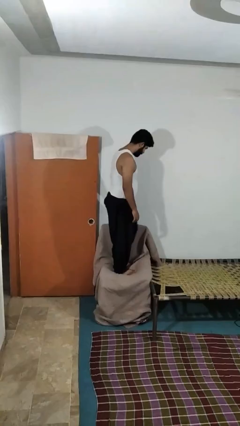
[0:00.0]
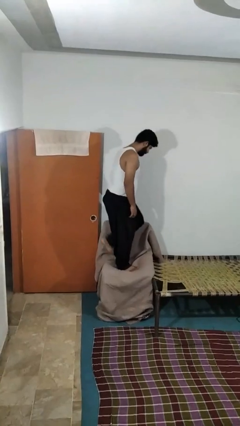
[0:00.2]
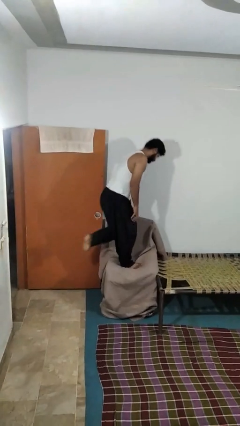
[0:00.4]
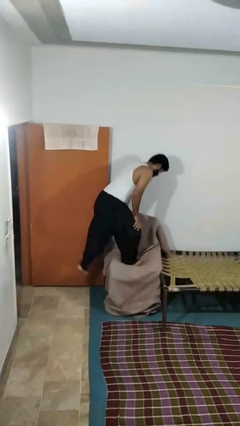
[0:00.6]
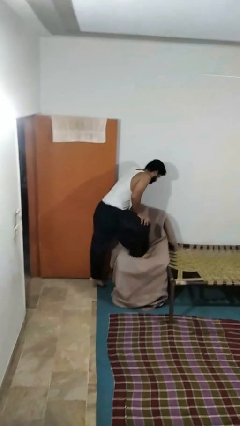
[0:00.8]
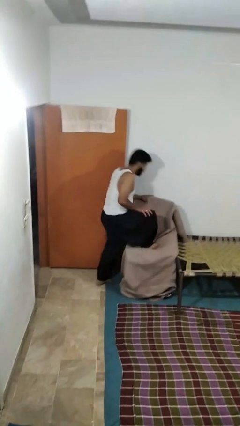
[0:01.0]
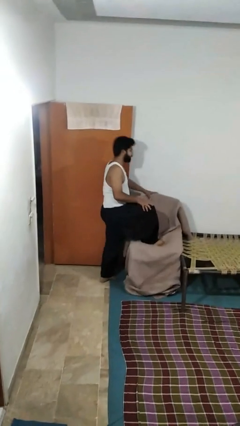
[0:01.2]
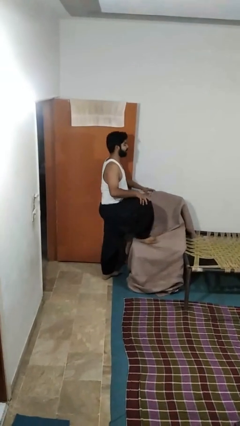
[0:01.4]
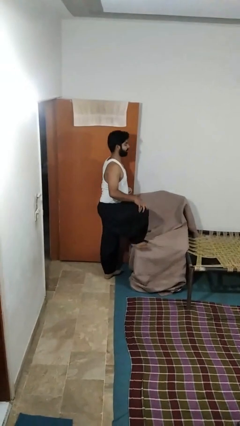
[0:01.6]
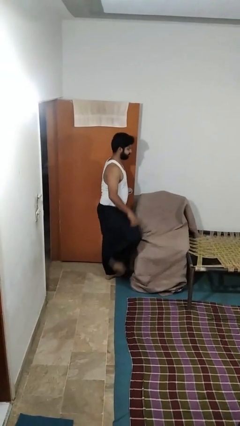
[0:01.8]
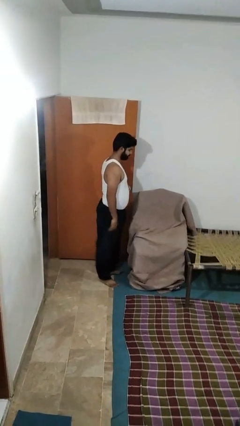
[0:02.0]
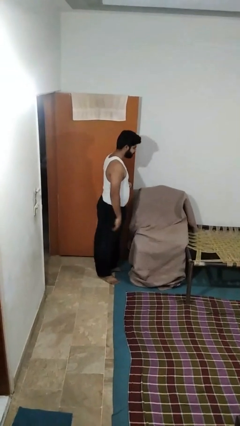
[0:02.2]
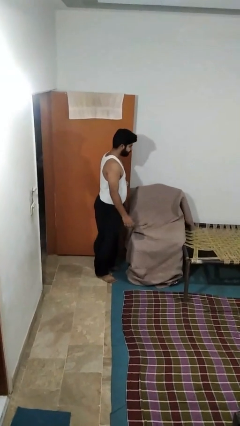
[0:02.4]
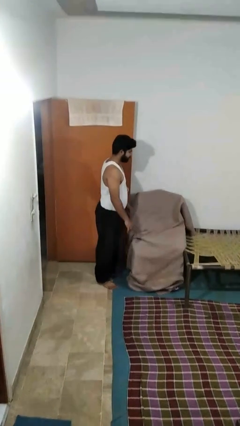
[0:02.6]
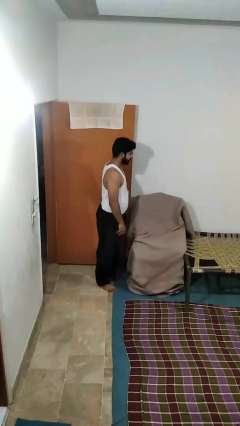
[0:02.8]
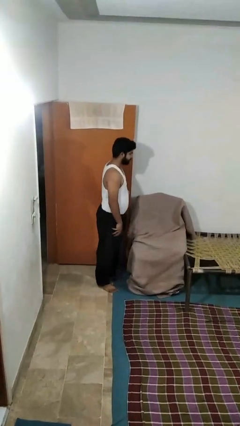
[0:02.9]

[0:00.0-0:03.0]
person climbs off couch

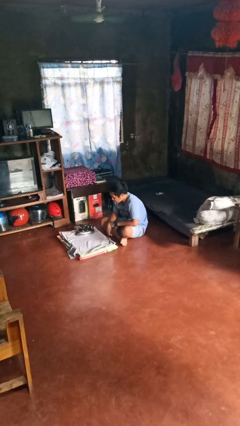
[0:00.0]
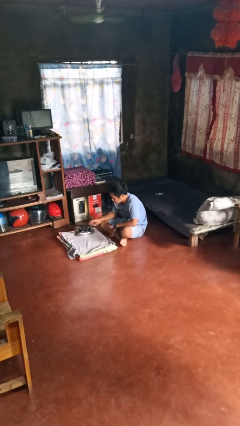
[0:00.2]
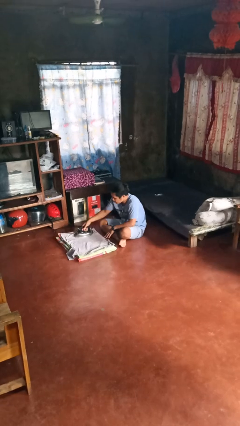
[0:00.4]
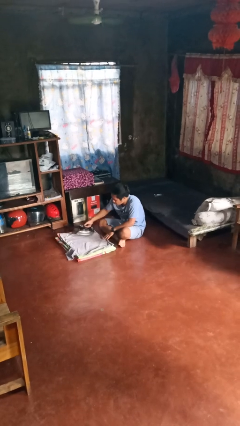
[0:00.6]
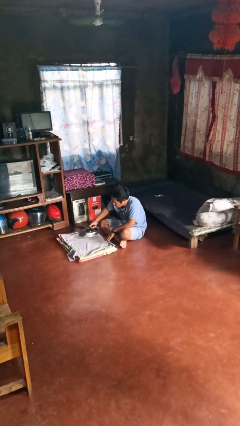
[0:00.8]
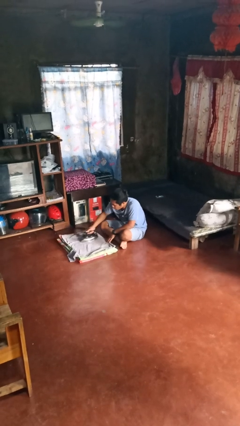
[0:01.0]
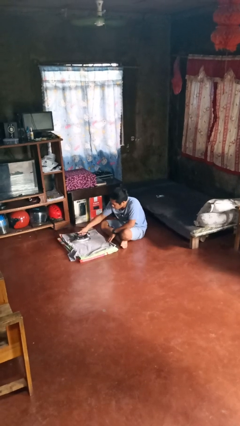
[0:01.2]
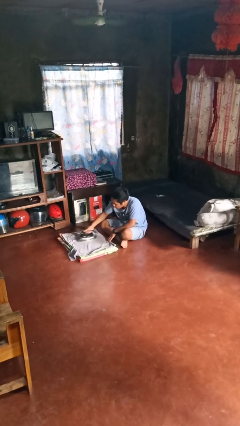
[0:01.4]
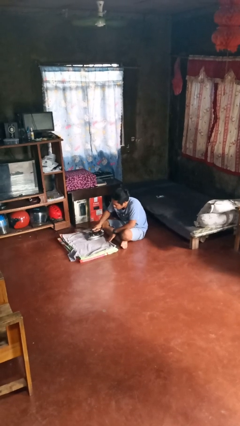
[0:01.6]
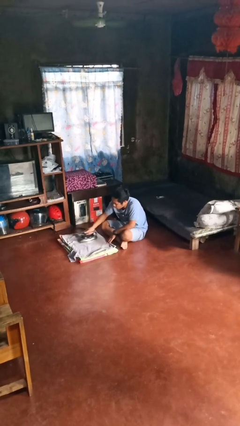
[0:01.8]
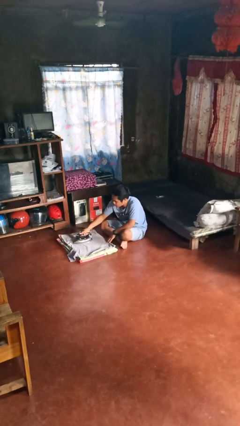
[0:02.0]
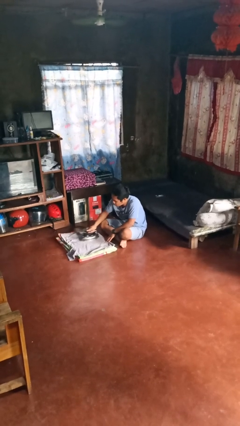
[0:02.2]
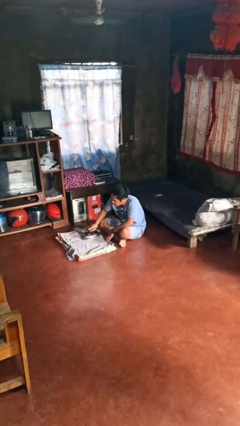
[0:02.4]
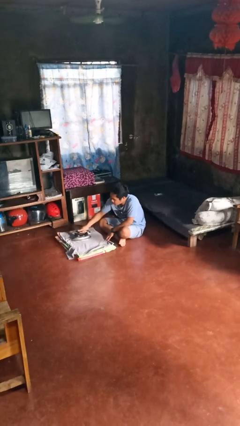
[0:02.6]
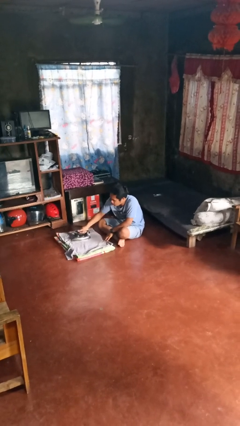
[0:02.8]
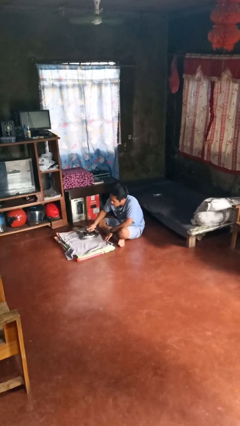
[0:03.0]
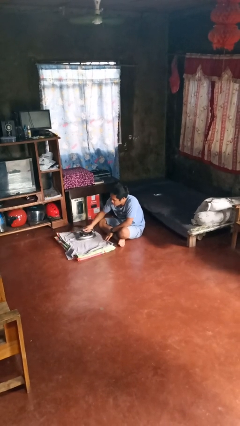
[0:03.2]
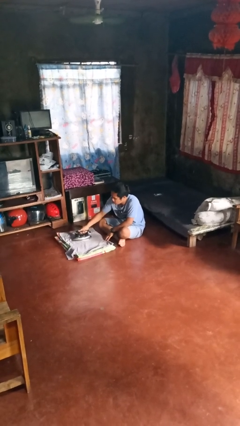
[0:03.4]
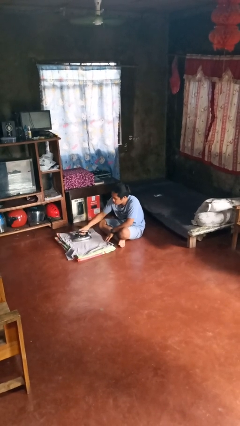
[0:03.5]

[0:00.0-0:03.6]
person irons clothes

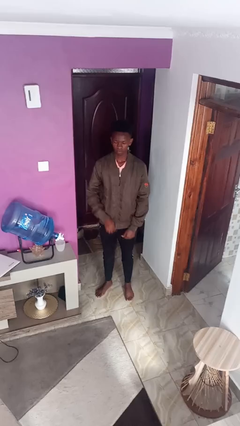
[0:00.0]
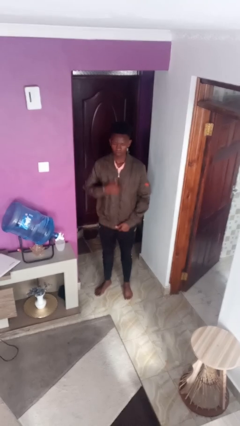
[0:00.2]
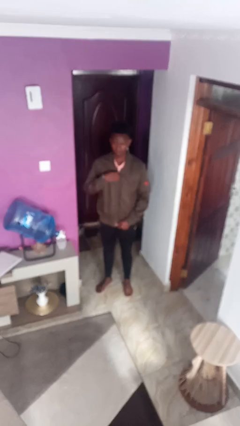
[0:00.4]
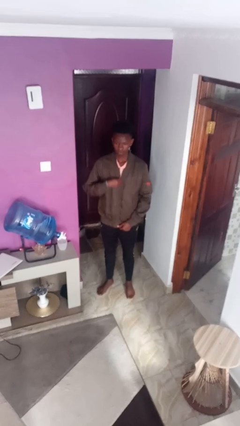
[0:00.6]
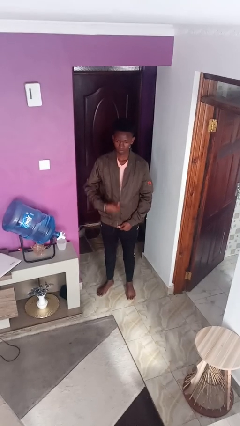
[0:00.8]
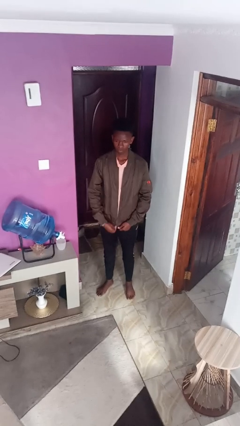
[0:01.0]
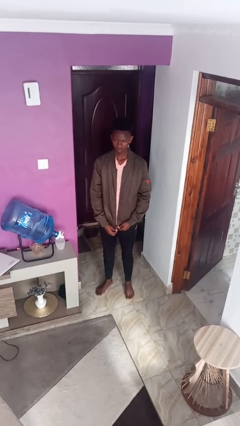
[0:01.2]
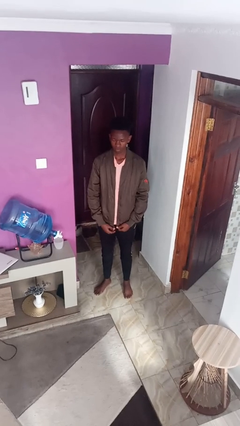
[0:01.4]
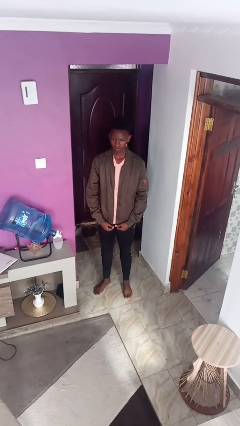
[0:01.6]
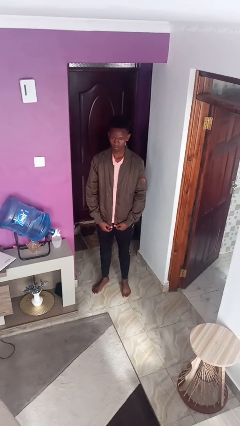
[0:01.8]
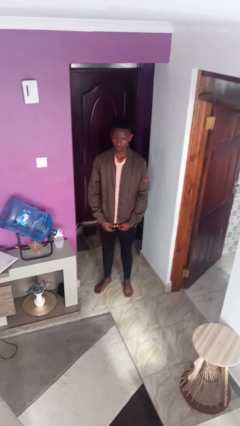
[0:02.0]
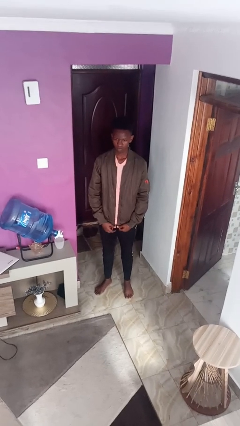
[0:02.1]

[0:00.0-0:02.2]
person unzips jacket

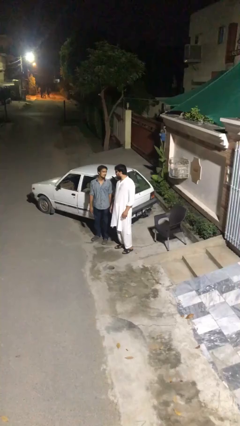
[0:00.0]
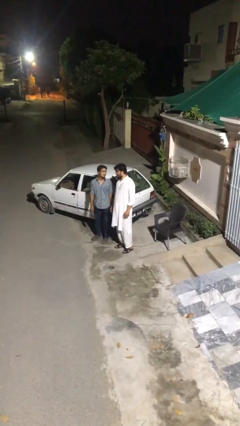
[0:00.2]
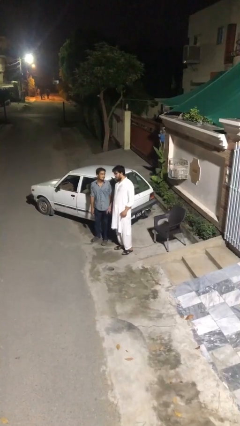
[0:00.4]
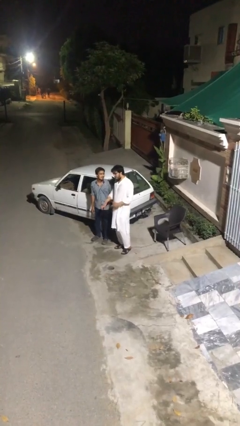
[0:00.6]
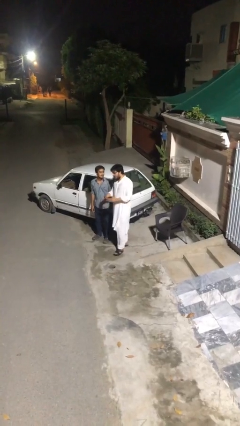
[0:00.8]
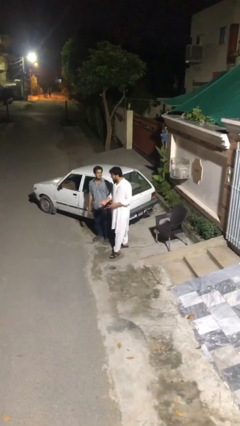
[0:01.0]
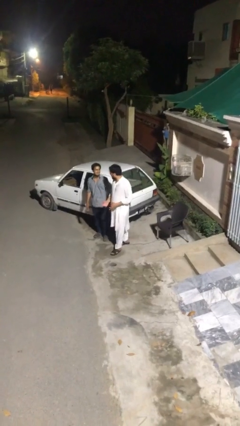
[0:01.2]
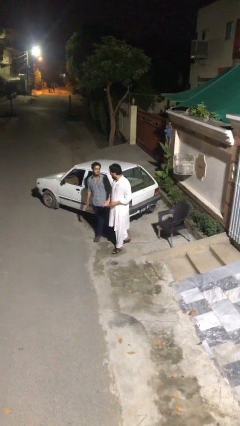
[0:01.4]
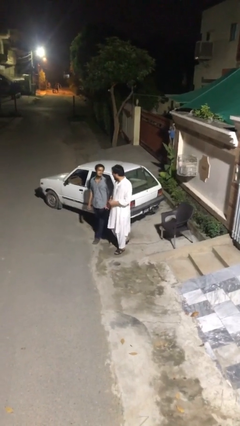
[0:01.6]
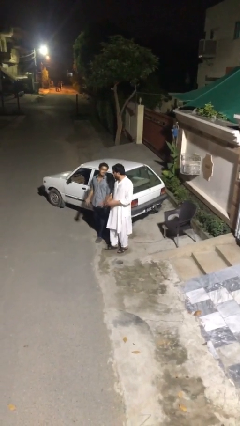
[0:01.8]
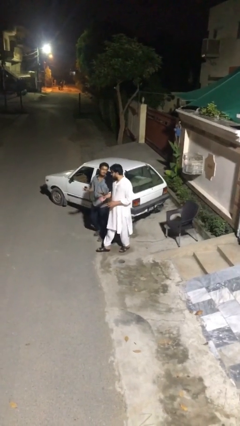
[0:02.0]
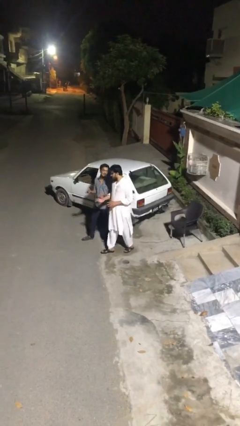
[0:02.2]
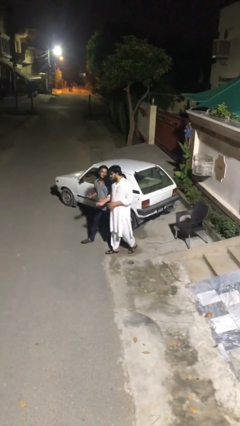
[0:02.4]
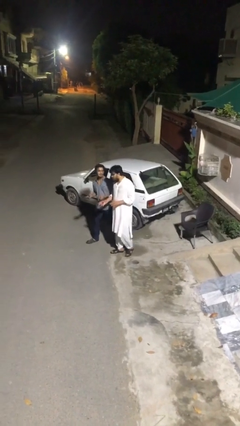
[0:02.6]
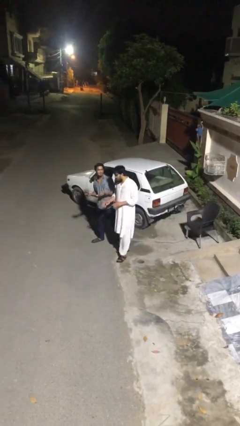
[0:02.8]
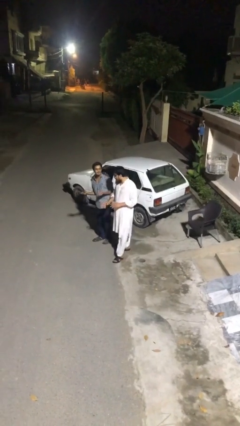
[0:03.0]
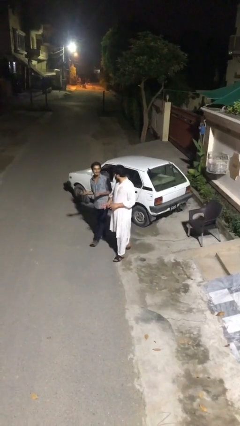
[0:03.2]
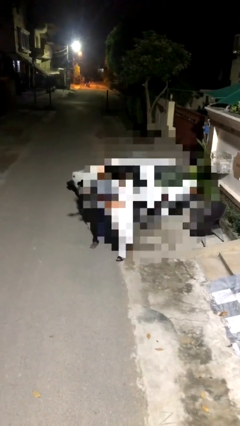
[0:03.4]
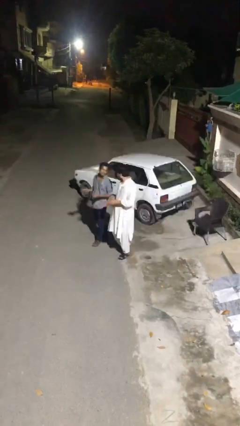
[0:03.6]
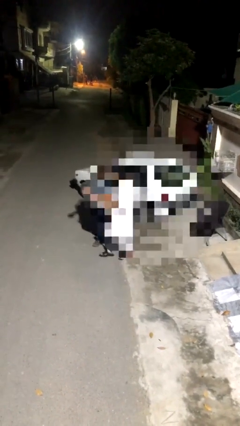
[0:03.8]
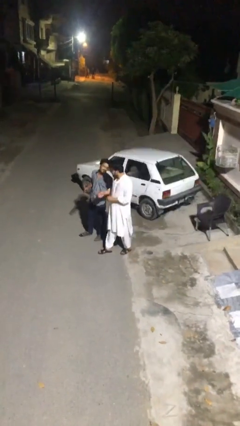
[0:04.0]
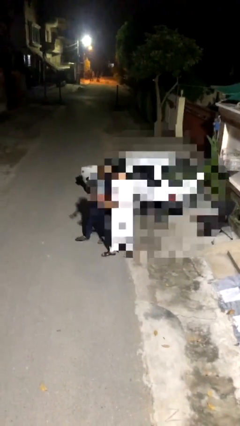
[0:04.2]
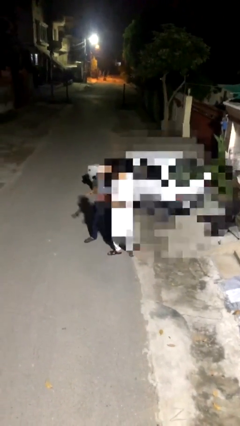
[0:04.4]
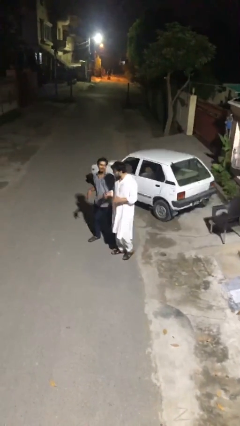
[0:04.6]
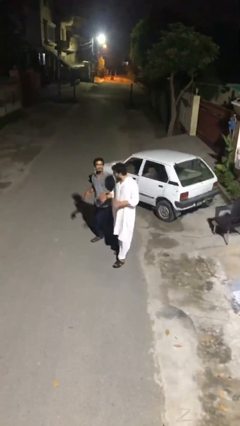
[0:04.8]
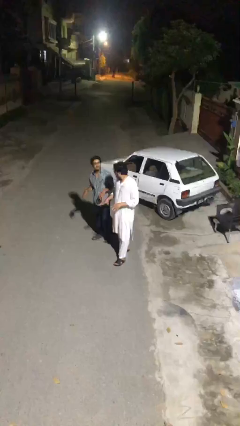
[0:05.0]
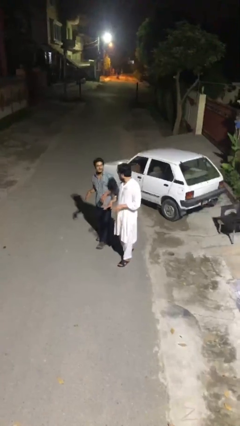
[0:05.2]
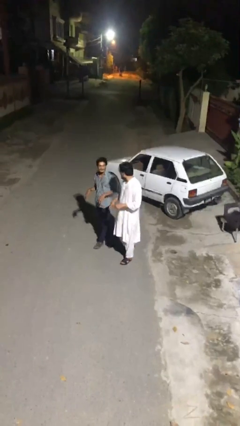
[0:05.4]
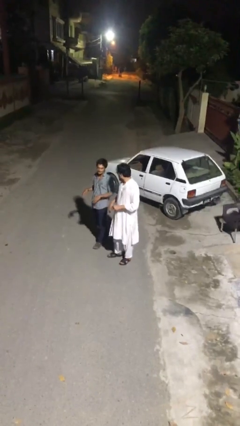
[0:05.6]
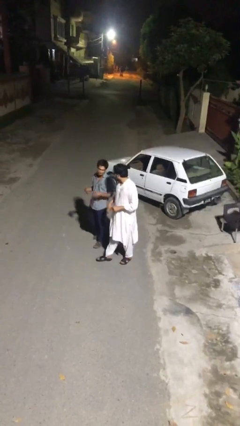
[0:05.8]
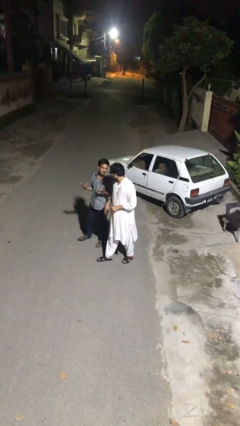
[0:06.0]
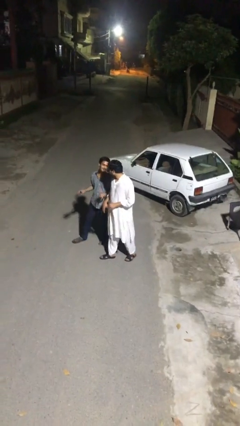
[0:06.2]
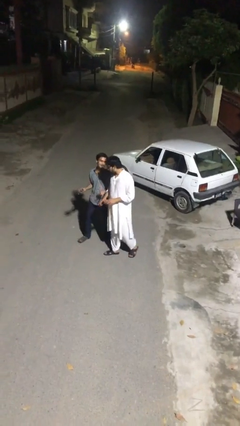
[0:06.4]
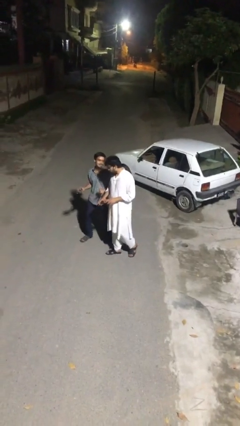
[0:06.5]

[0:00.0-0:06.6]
person talks to person

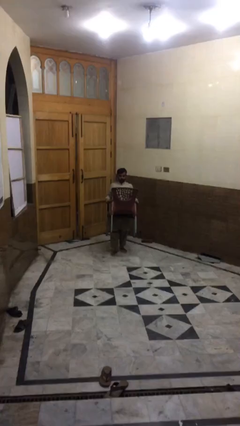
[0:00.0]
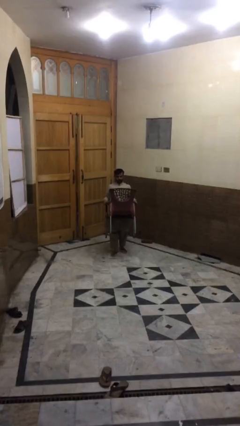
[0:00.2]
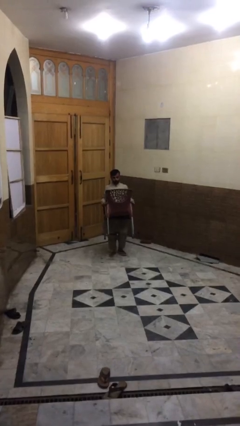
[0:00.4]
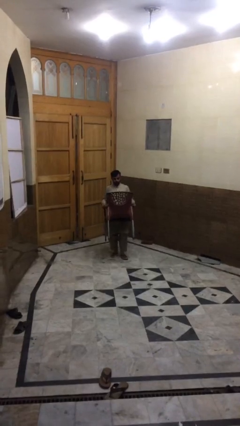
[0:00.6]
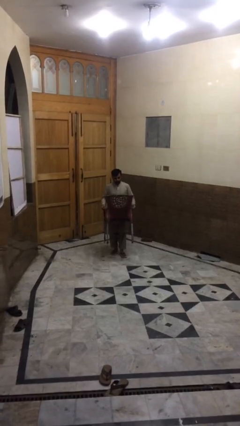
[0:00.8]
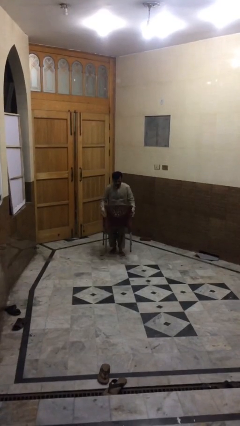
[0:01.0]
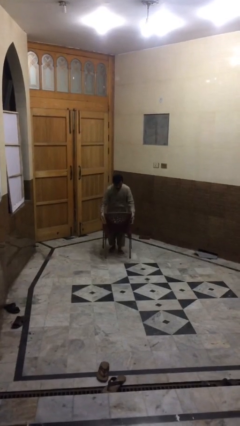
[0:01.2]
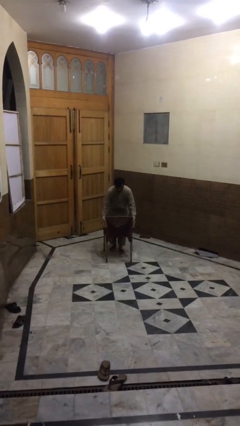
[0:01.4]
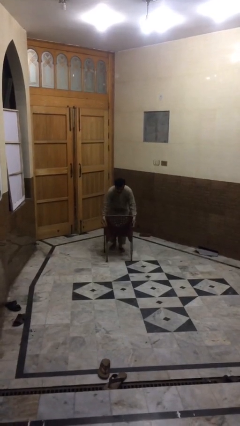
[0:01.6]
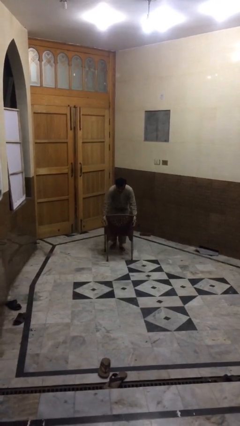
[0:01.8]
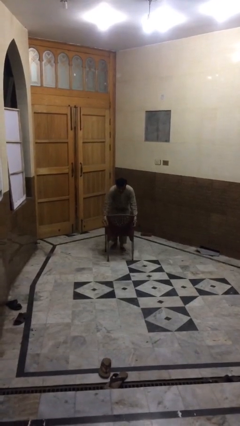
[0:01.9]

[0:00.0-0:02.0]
person puts down object on floor

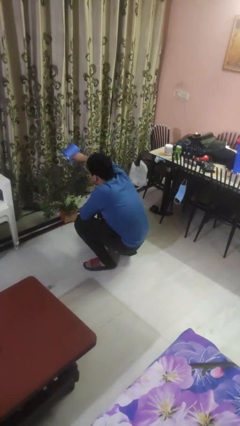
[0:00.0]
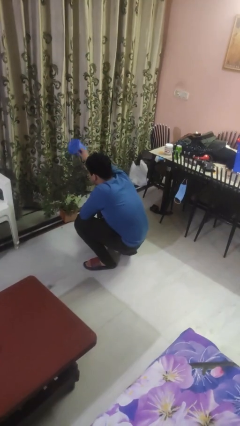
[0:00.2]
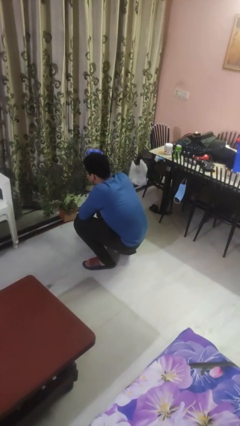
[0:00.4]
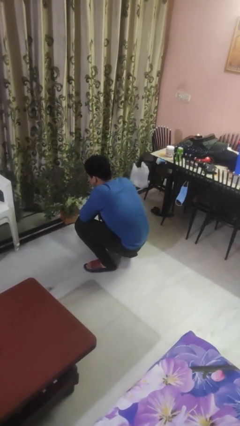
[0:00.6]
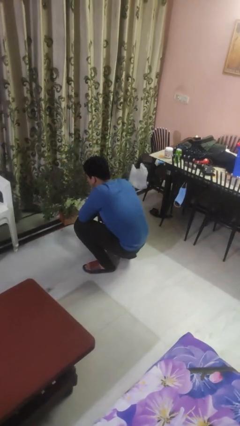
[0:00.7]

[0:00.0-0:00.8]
person waters houseplant
